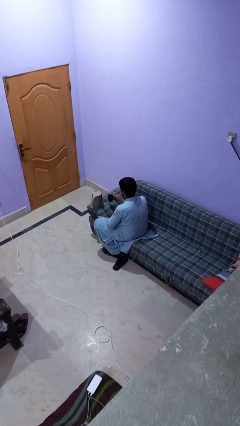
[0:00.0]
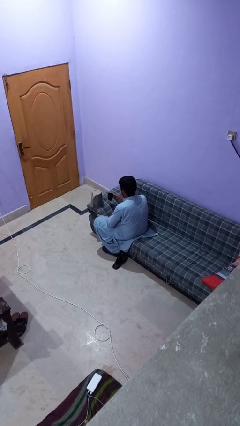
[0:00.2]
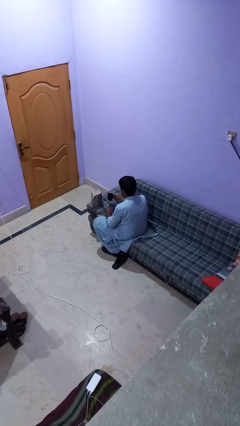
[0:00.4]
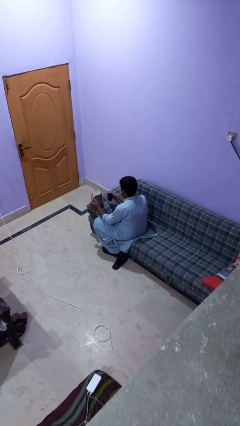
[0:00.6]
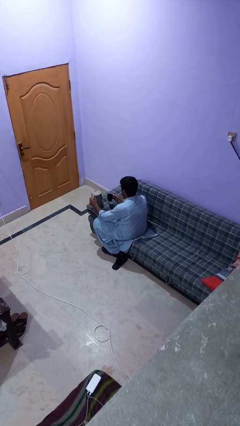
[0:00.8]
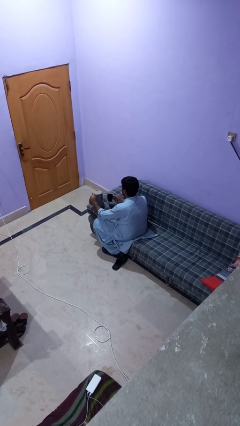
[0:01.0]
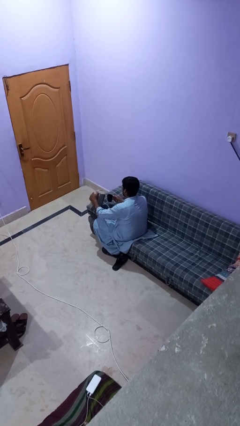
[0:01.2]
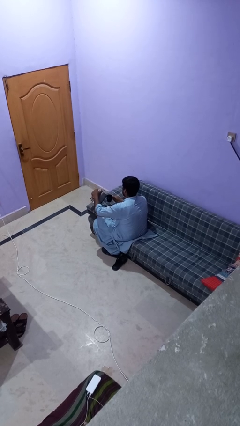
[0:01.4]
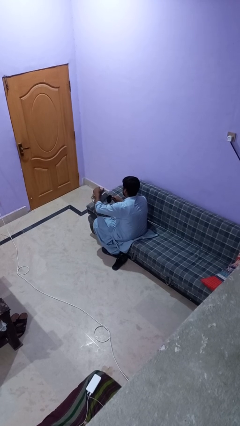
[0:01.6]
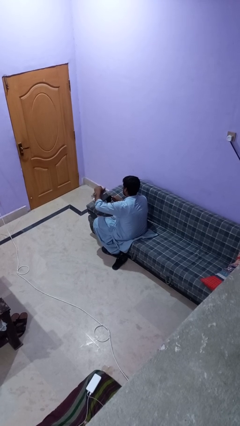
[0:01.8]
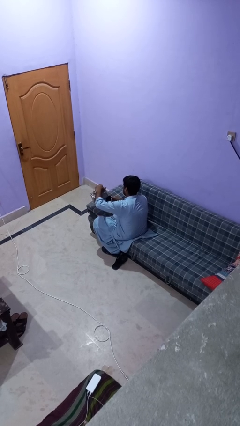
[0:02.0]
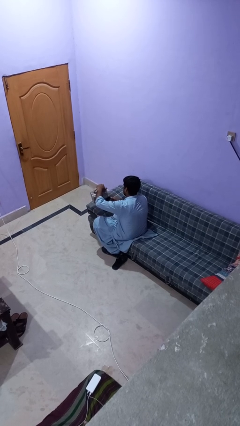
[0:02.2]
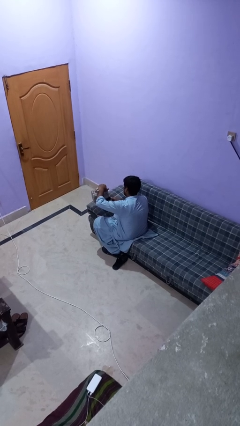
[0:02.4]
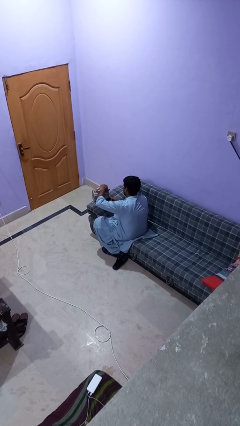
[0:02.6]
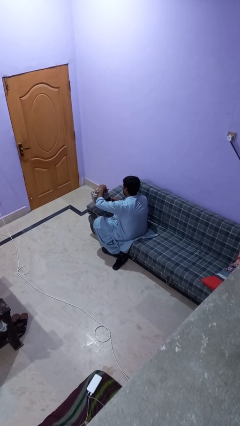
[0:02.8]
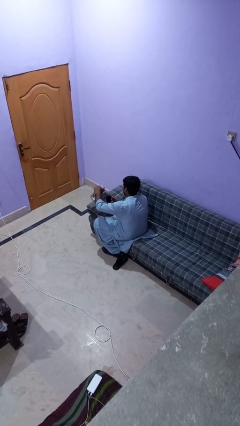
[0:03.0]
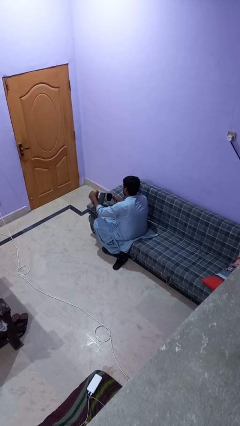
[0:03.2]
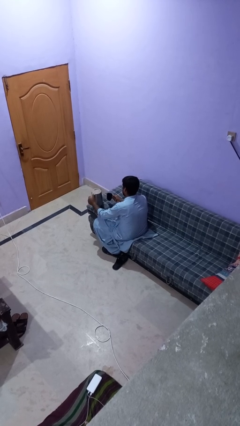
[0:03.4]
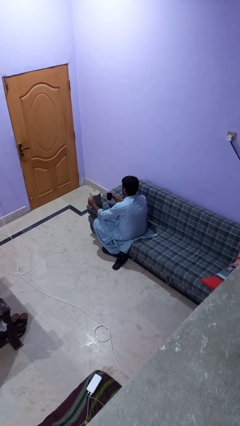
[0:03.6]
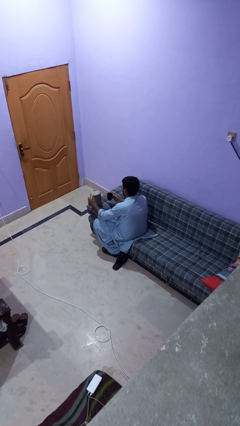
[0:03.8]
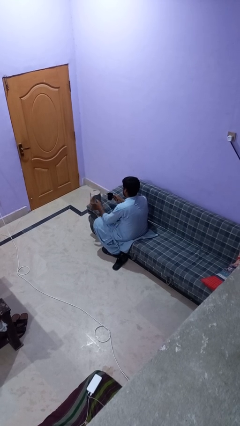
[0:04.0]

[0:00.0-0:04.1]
person pours coffee into mug

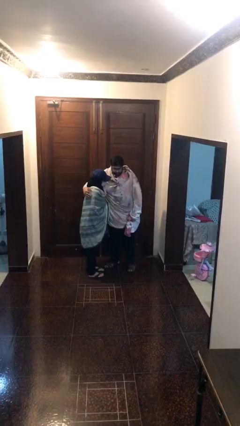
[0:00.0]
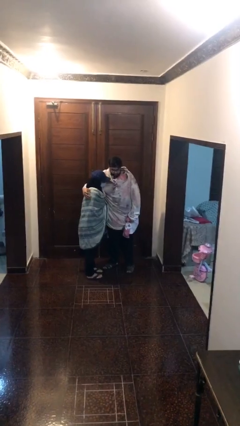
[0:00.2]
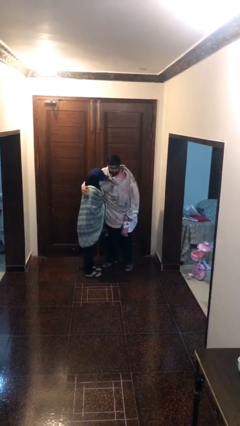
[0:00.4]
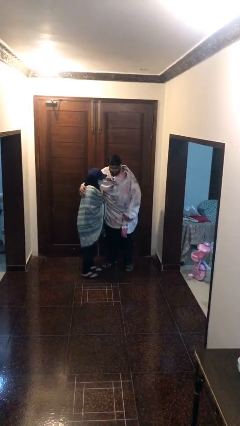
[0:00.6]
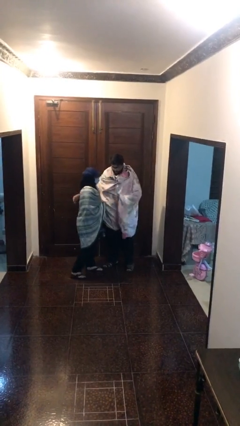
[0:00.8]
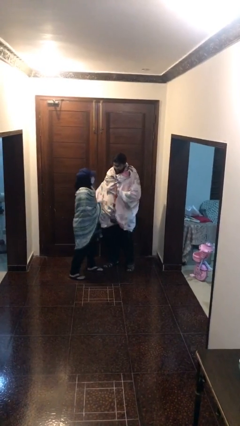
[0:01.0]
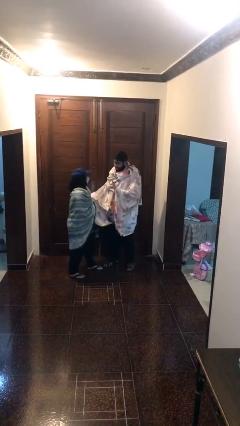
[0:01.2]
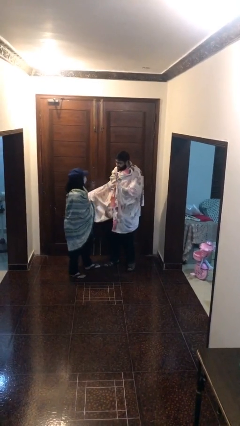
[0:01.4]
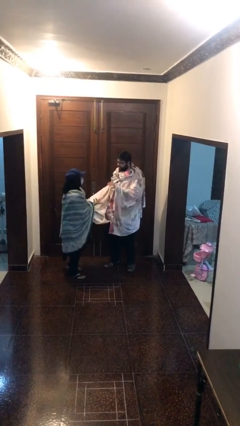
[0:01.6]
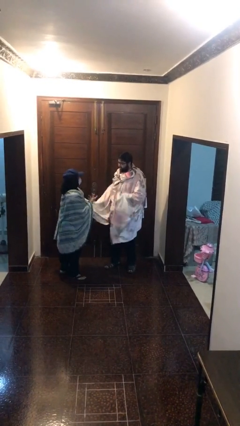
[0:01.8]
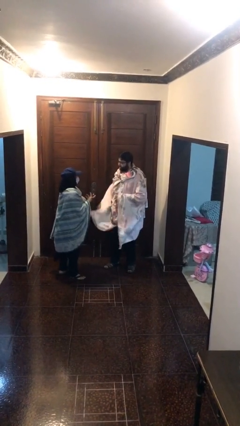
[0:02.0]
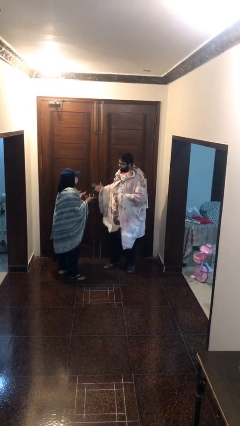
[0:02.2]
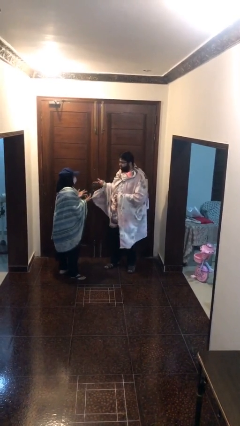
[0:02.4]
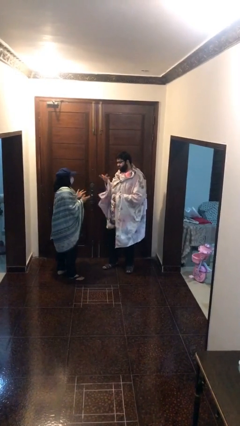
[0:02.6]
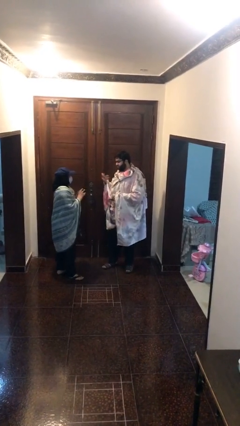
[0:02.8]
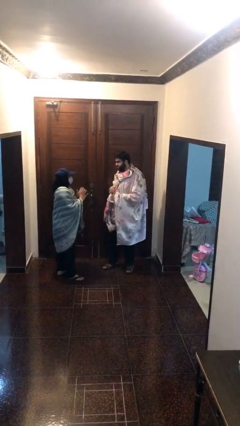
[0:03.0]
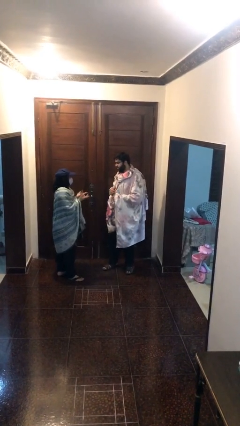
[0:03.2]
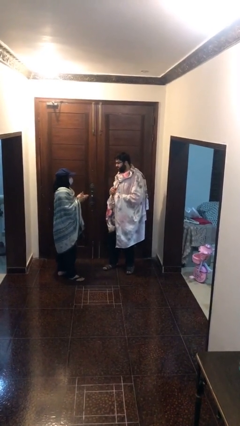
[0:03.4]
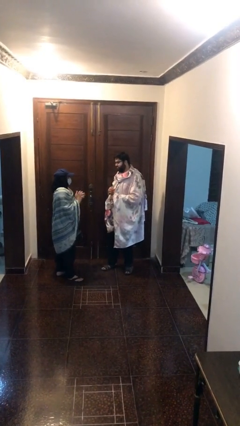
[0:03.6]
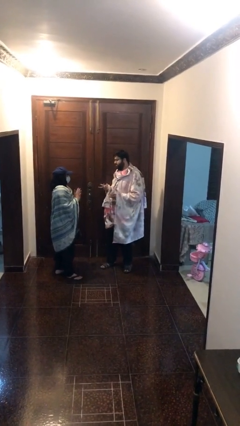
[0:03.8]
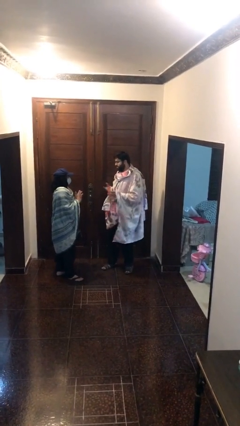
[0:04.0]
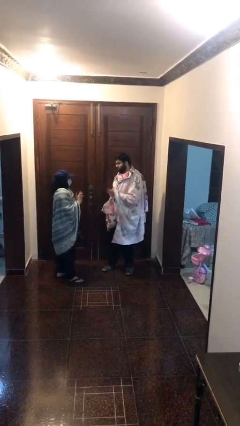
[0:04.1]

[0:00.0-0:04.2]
person talks to person

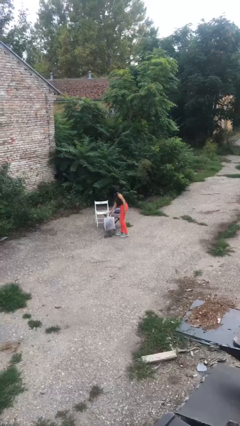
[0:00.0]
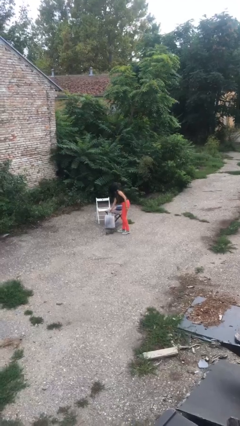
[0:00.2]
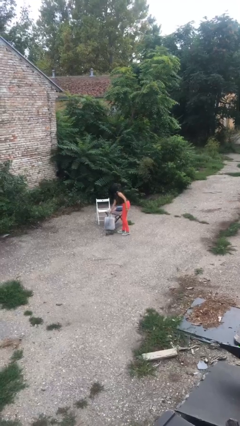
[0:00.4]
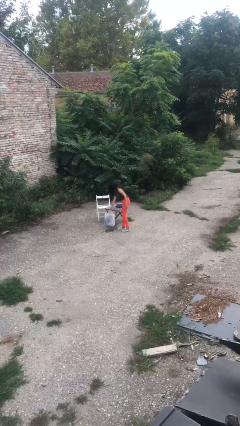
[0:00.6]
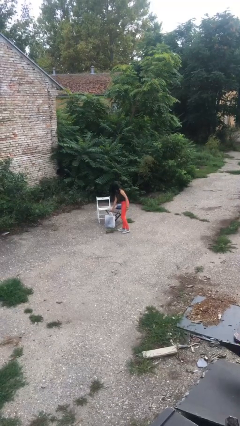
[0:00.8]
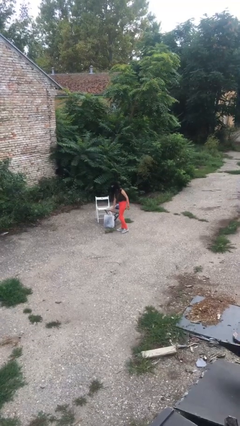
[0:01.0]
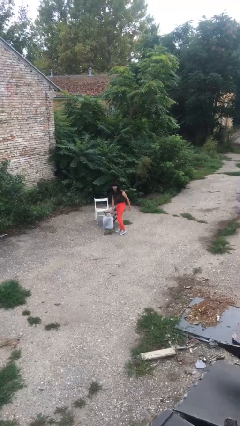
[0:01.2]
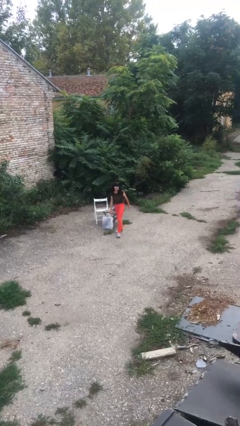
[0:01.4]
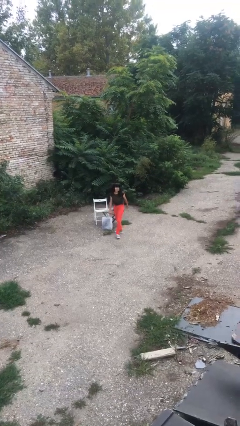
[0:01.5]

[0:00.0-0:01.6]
person puts down object on floor

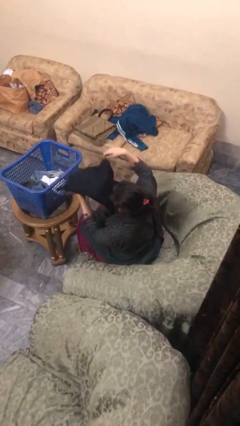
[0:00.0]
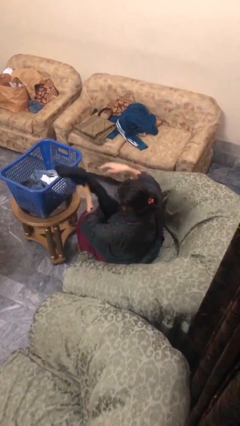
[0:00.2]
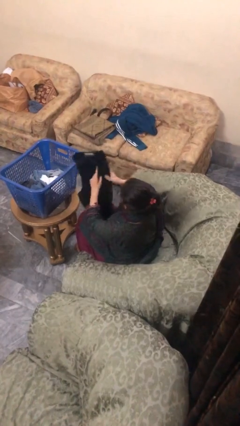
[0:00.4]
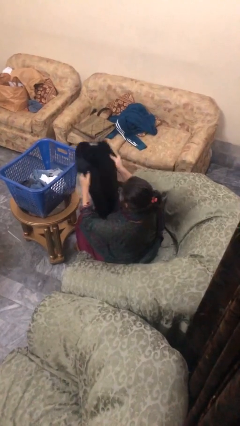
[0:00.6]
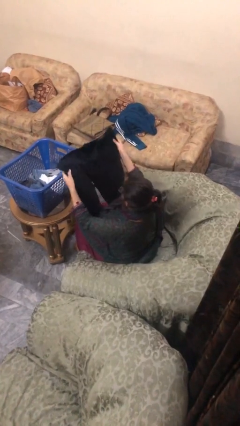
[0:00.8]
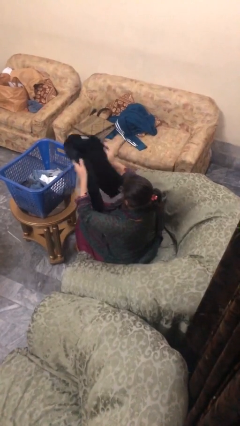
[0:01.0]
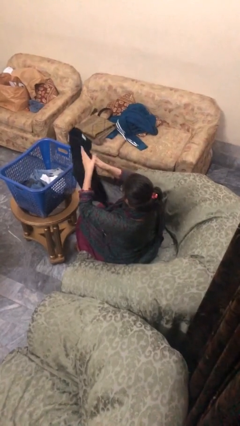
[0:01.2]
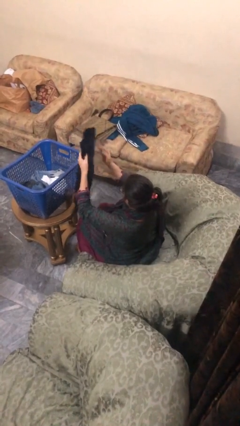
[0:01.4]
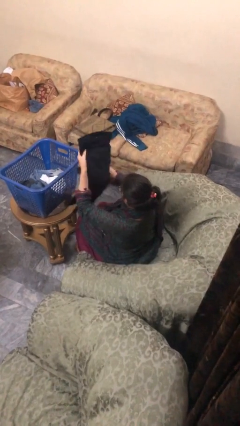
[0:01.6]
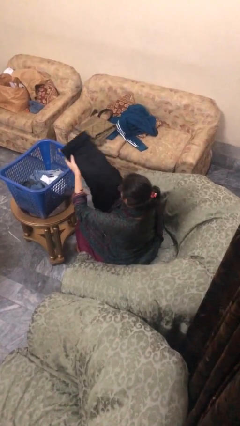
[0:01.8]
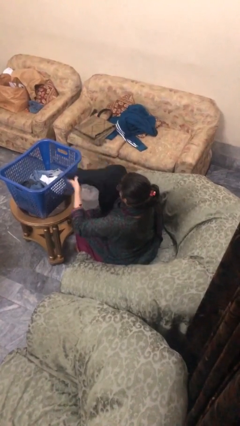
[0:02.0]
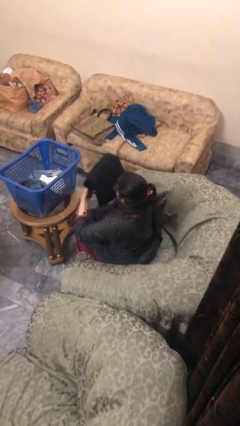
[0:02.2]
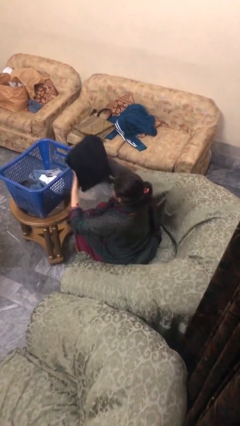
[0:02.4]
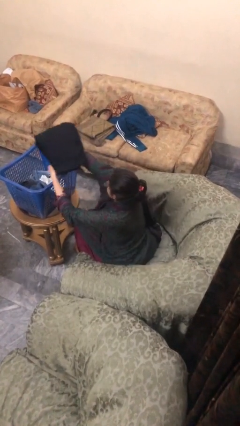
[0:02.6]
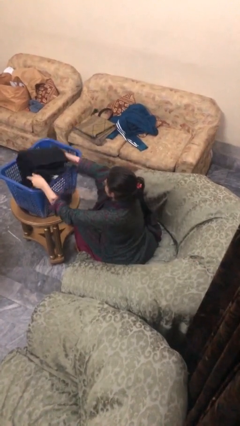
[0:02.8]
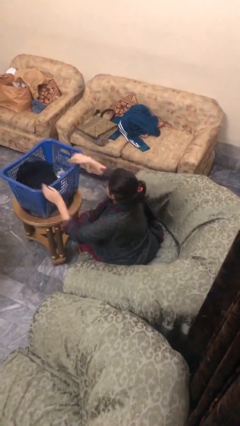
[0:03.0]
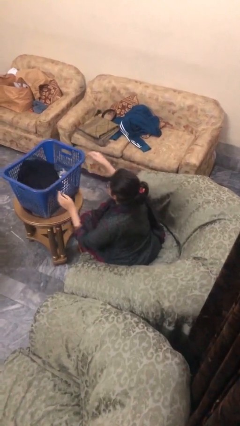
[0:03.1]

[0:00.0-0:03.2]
person folds pants

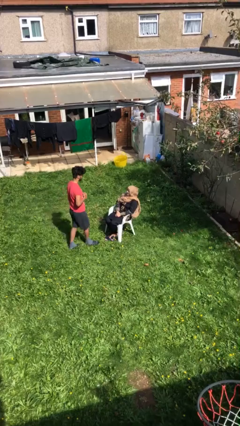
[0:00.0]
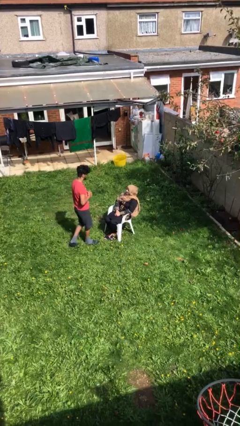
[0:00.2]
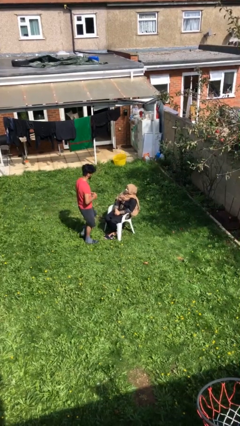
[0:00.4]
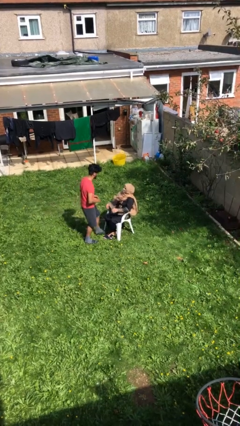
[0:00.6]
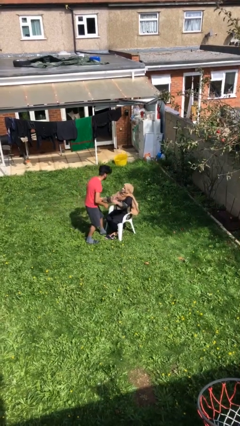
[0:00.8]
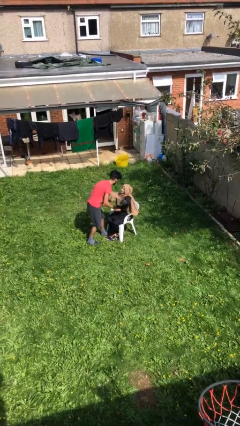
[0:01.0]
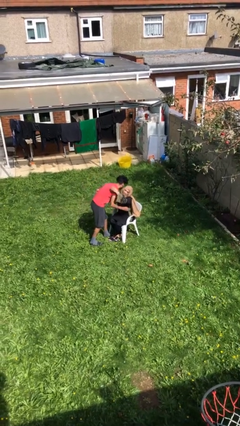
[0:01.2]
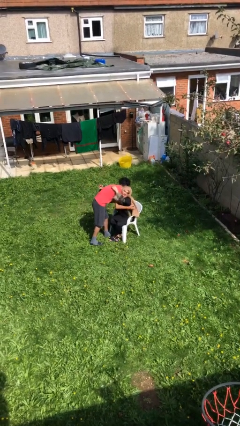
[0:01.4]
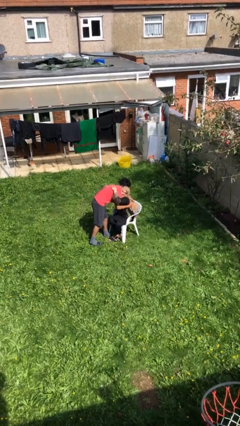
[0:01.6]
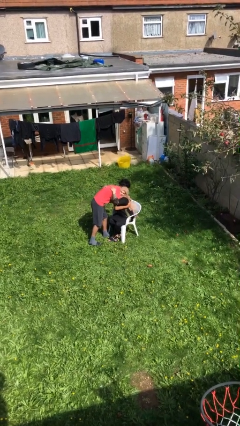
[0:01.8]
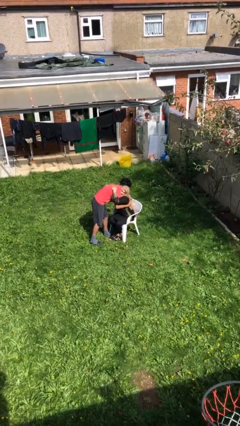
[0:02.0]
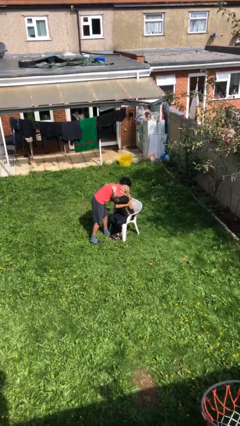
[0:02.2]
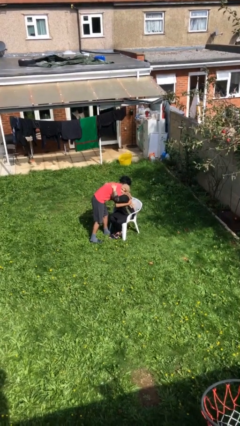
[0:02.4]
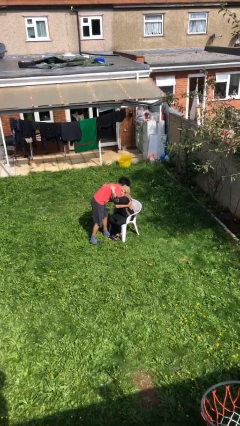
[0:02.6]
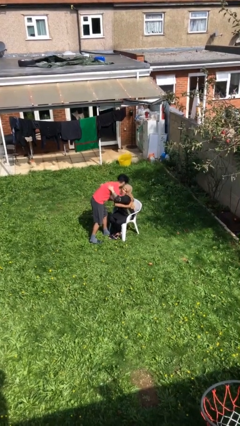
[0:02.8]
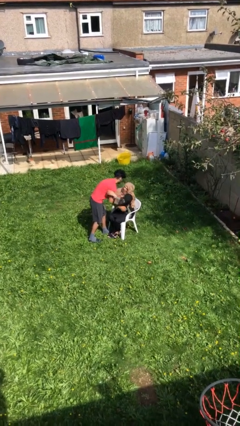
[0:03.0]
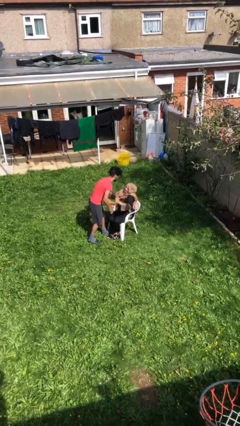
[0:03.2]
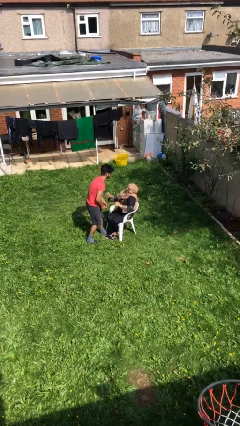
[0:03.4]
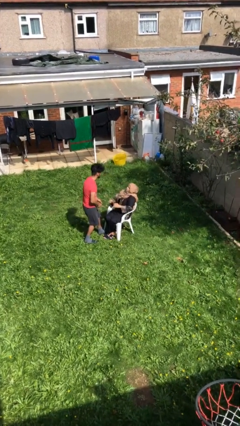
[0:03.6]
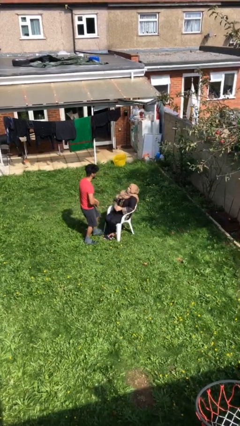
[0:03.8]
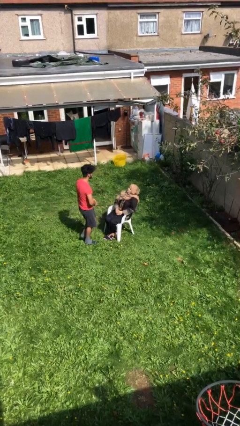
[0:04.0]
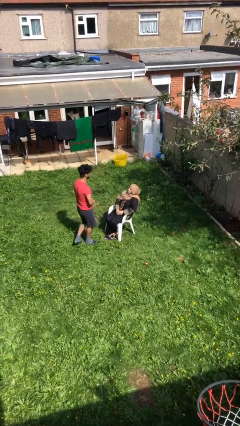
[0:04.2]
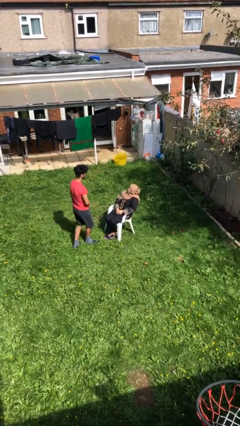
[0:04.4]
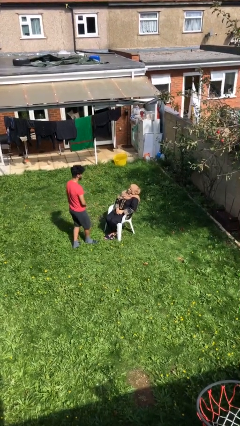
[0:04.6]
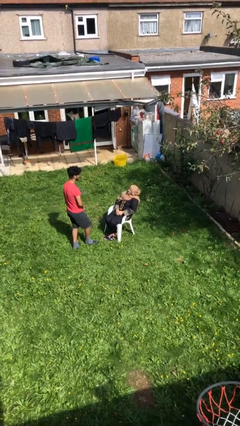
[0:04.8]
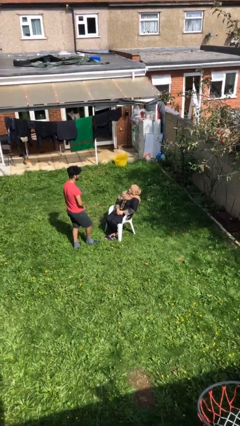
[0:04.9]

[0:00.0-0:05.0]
person embraces person
